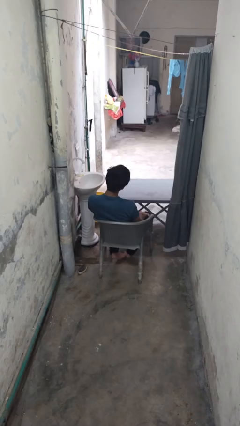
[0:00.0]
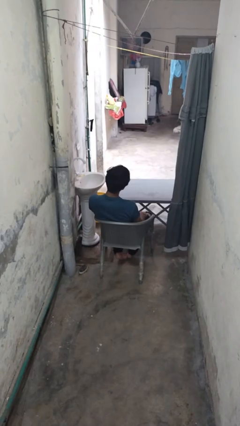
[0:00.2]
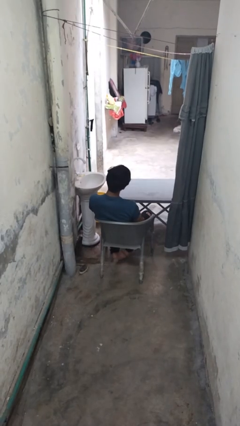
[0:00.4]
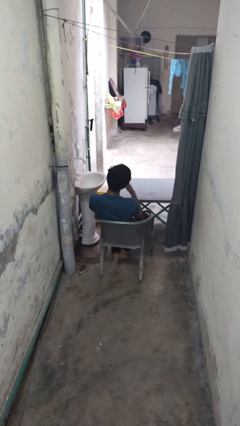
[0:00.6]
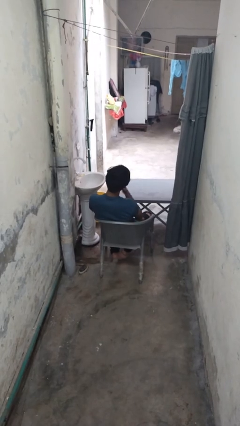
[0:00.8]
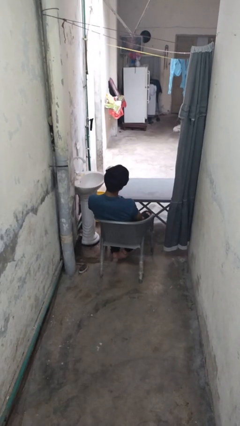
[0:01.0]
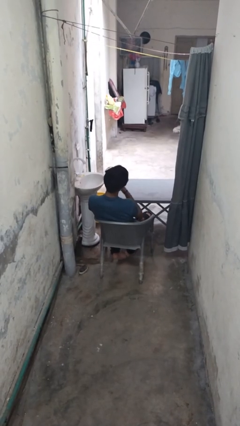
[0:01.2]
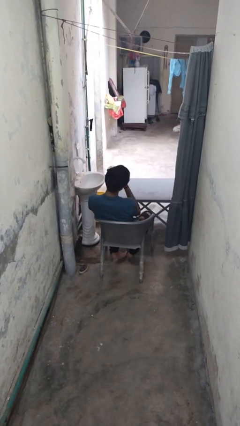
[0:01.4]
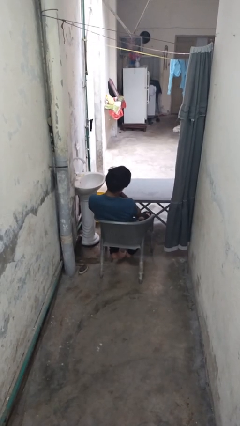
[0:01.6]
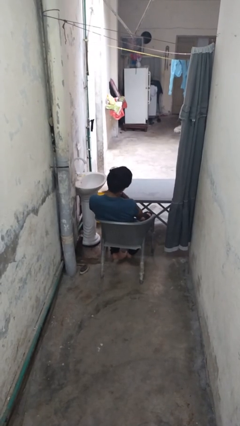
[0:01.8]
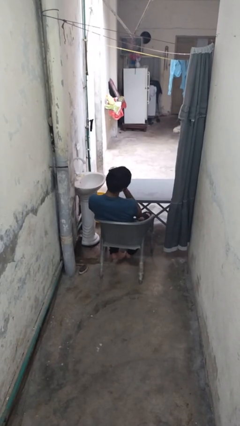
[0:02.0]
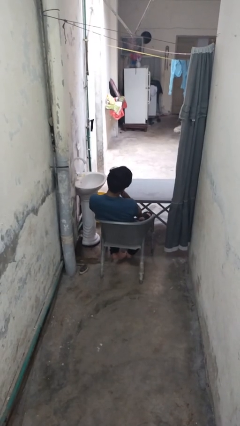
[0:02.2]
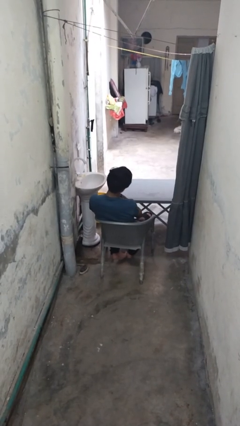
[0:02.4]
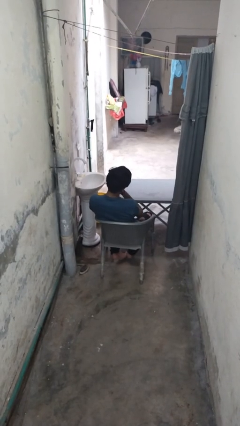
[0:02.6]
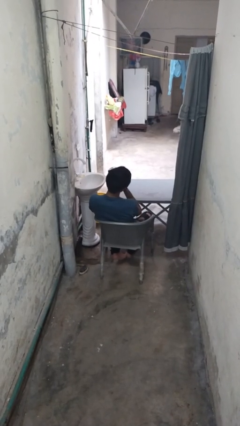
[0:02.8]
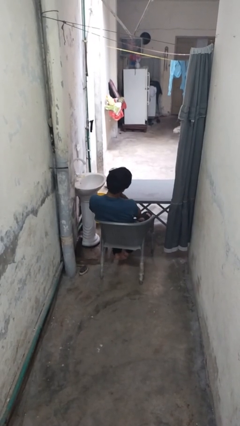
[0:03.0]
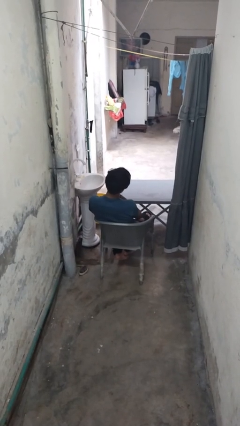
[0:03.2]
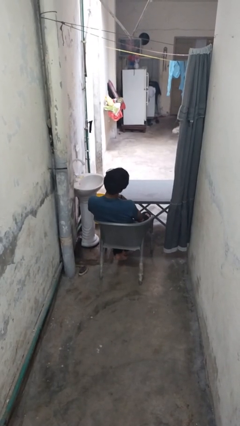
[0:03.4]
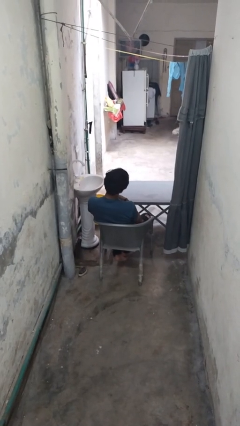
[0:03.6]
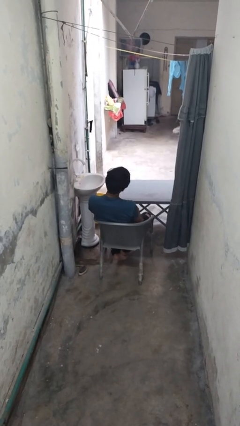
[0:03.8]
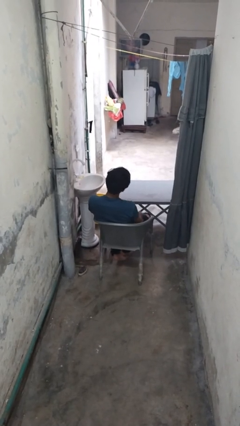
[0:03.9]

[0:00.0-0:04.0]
person drums on chest

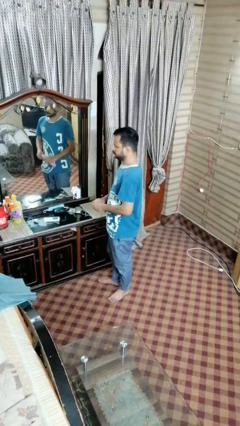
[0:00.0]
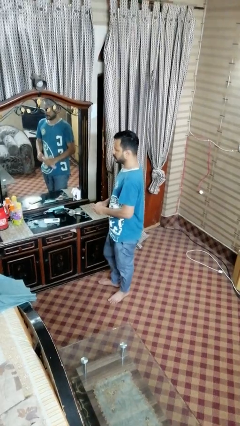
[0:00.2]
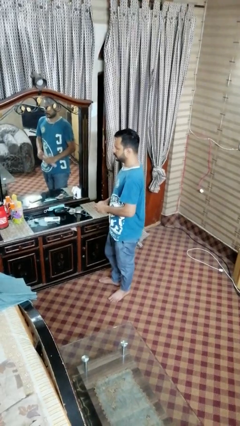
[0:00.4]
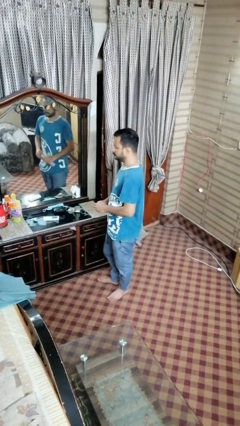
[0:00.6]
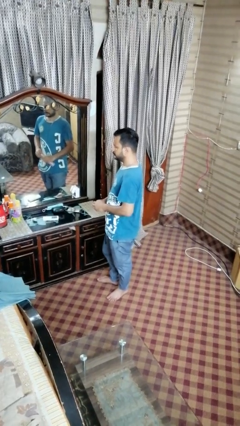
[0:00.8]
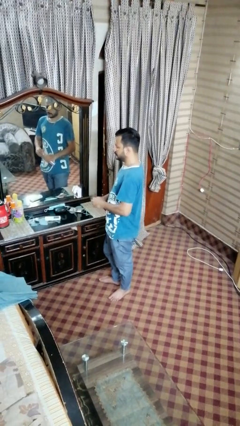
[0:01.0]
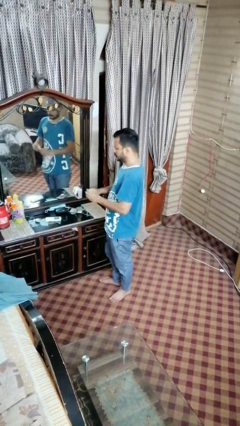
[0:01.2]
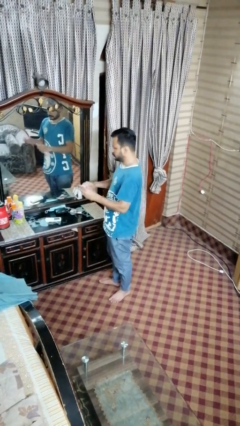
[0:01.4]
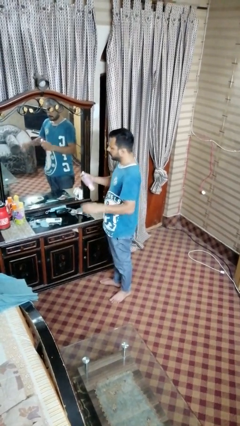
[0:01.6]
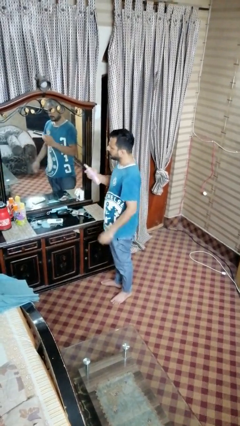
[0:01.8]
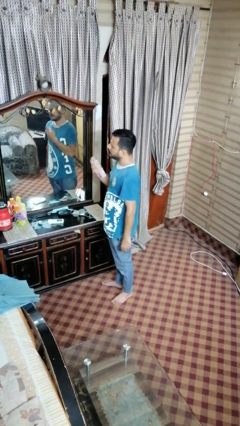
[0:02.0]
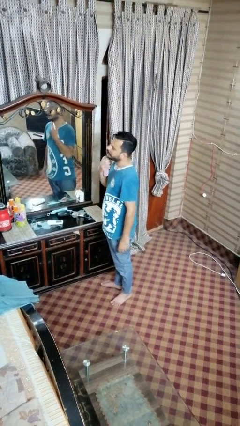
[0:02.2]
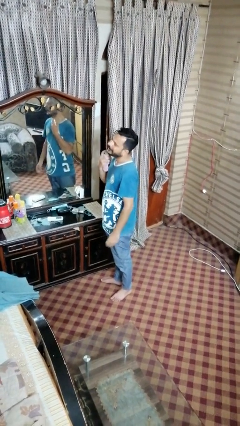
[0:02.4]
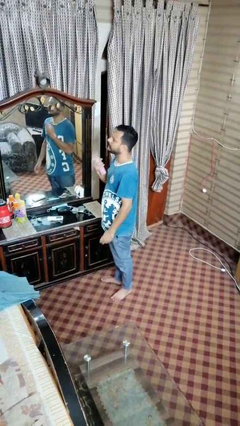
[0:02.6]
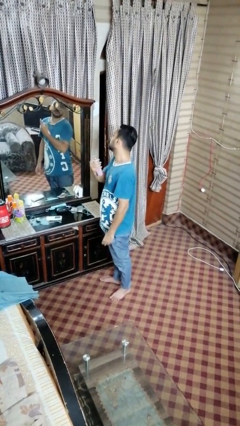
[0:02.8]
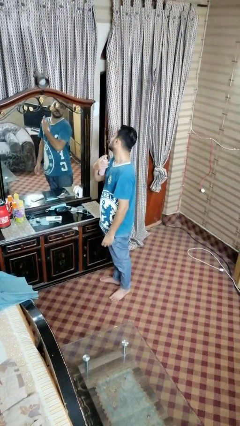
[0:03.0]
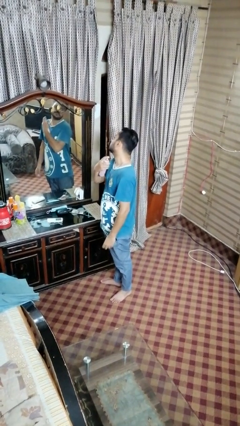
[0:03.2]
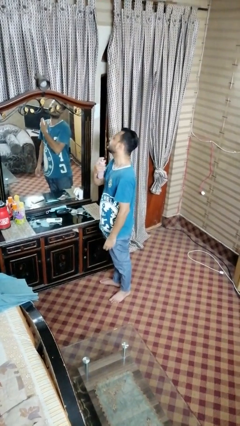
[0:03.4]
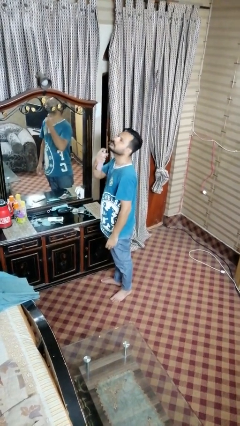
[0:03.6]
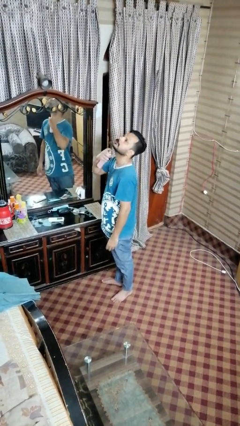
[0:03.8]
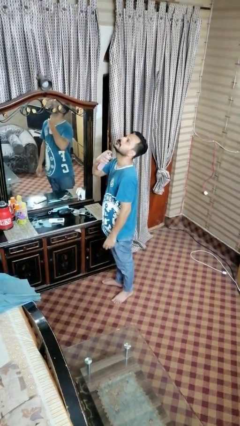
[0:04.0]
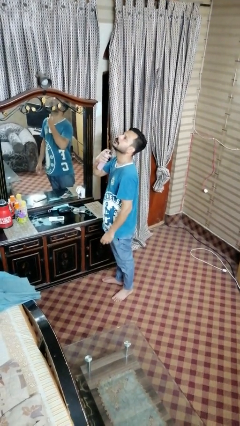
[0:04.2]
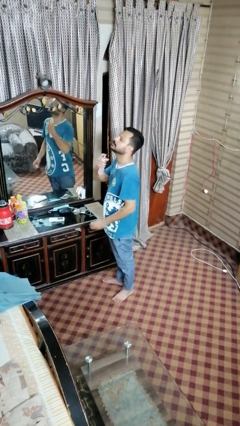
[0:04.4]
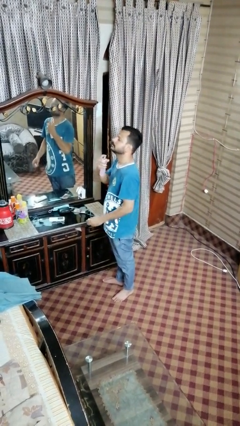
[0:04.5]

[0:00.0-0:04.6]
person sprays from bottle

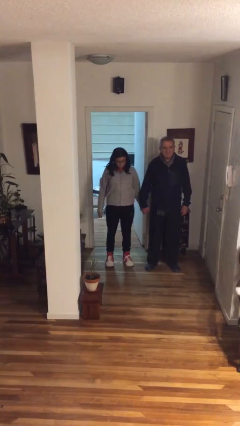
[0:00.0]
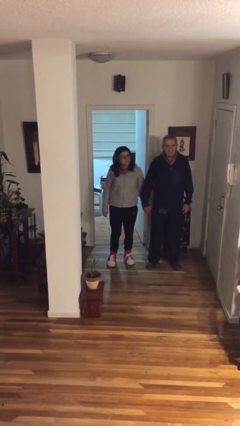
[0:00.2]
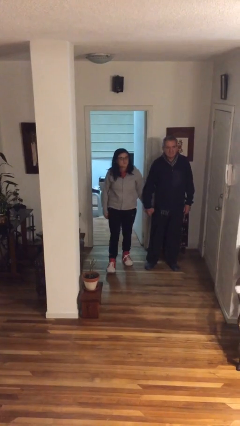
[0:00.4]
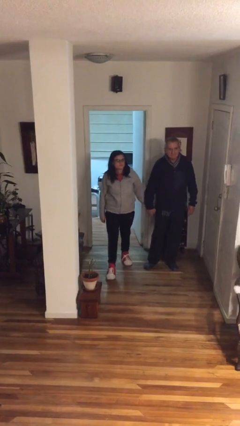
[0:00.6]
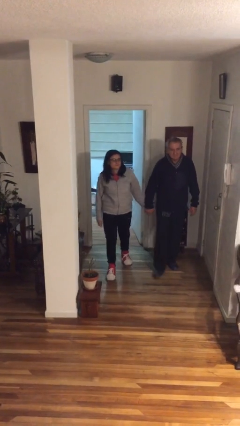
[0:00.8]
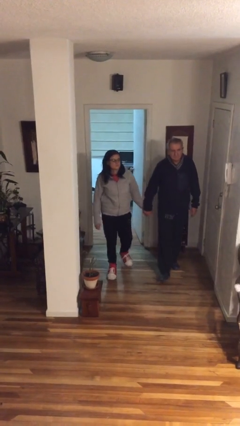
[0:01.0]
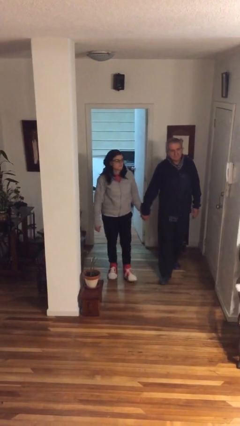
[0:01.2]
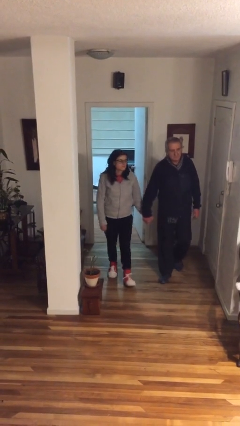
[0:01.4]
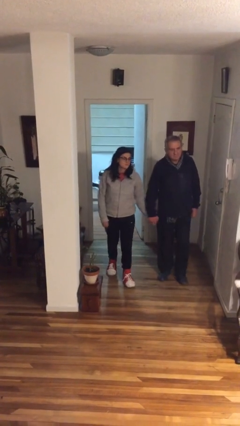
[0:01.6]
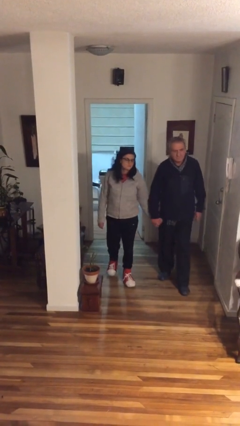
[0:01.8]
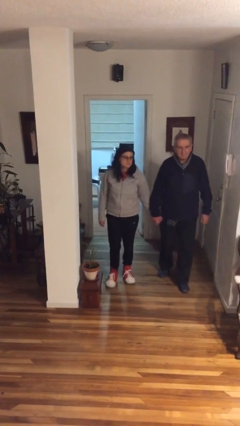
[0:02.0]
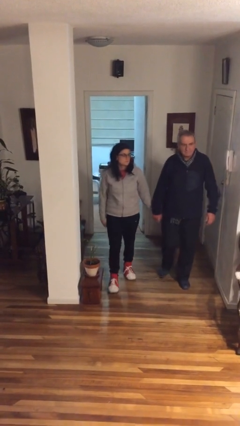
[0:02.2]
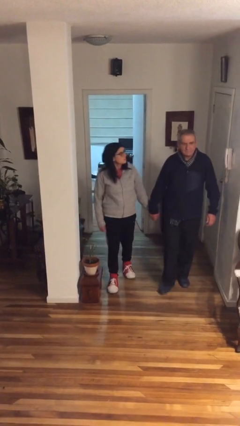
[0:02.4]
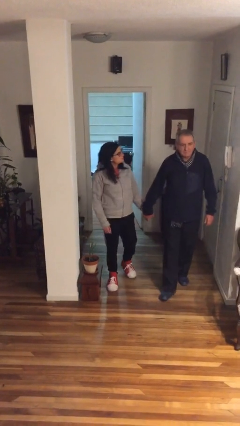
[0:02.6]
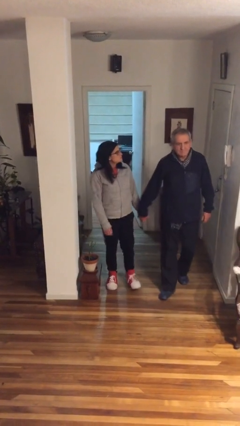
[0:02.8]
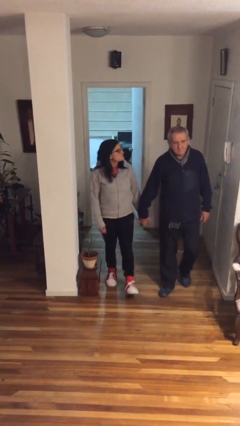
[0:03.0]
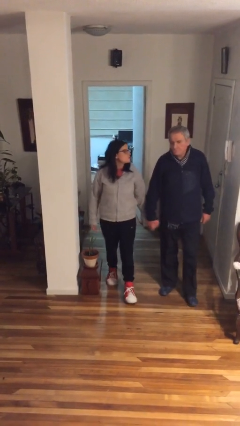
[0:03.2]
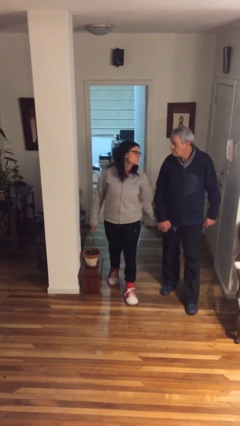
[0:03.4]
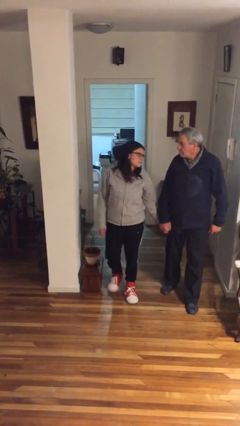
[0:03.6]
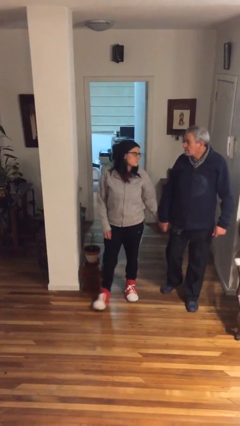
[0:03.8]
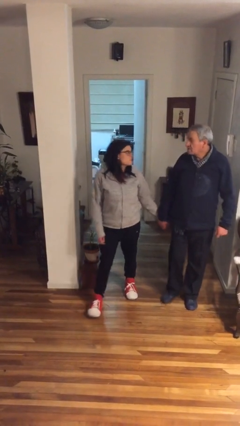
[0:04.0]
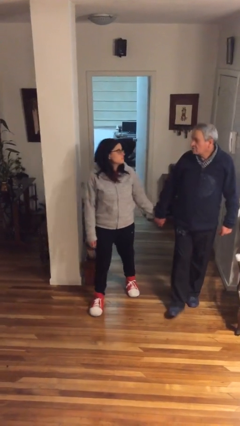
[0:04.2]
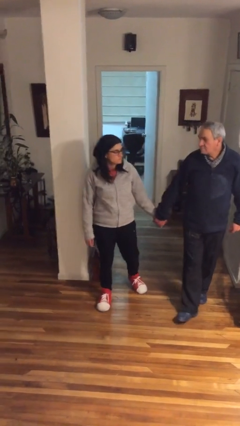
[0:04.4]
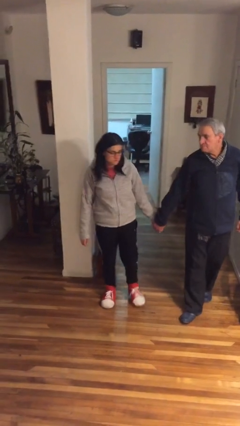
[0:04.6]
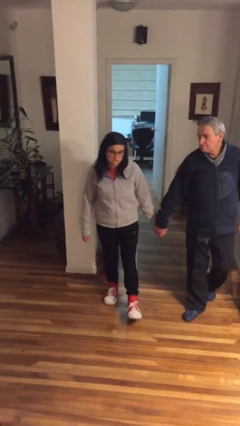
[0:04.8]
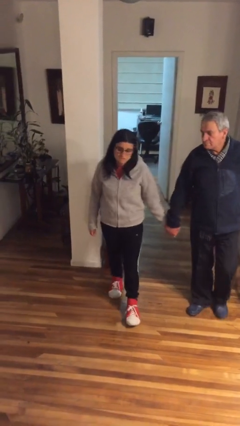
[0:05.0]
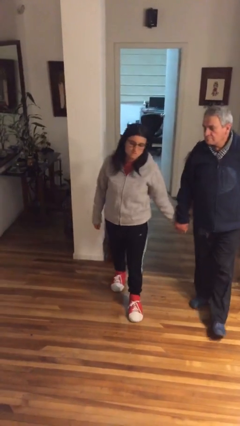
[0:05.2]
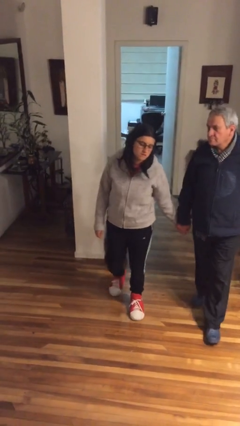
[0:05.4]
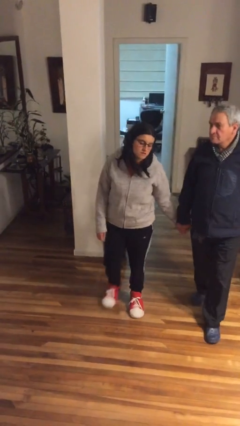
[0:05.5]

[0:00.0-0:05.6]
person holds hand

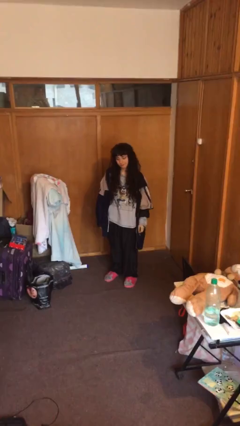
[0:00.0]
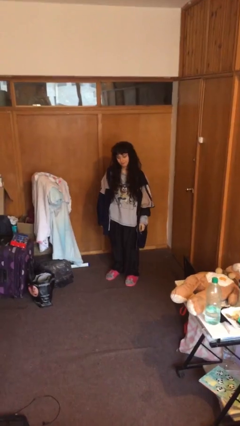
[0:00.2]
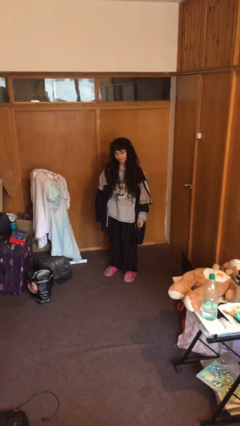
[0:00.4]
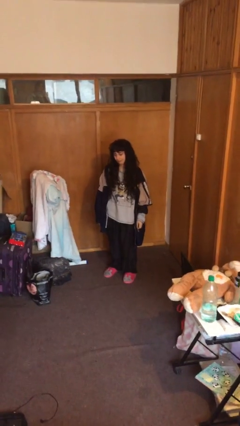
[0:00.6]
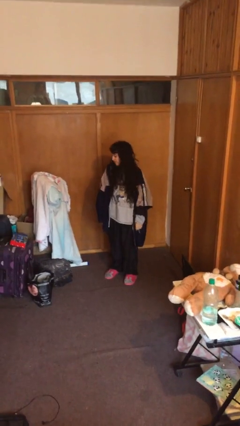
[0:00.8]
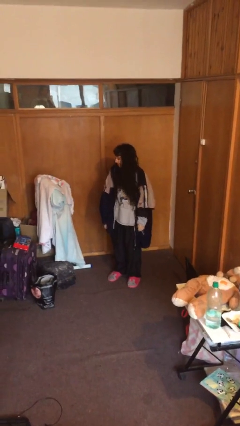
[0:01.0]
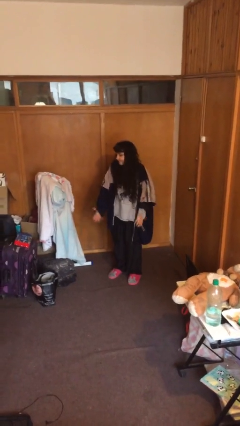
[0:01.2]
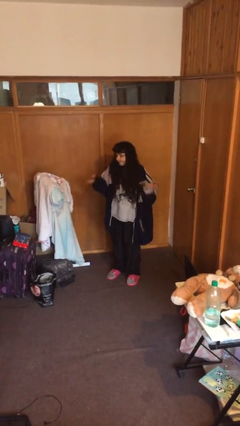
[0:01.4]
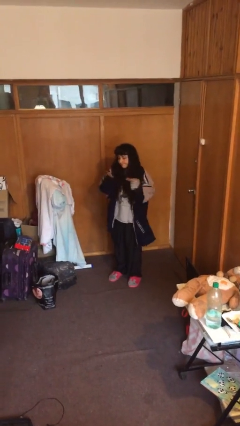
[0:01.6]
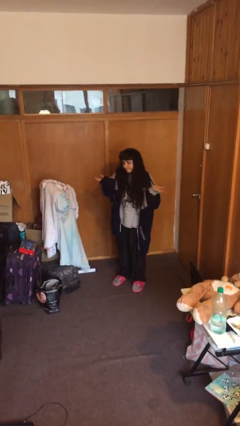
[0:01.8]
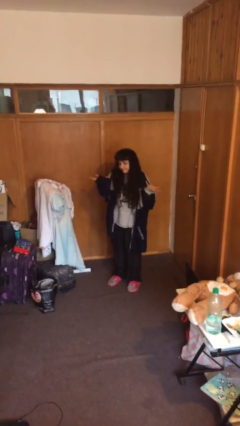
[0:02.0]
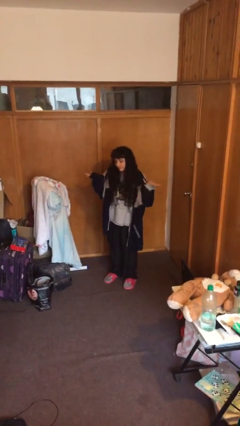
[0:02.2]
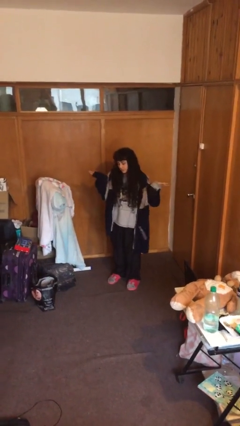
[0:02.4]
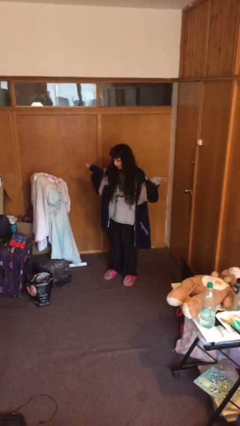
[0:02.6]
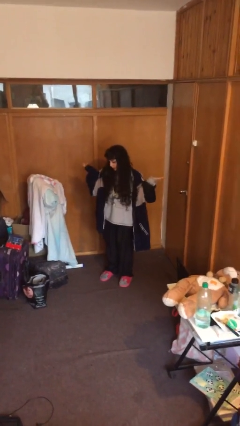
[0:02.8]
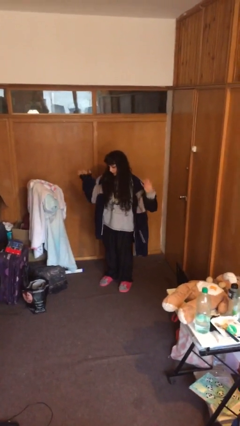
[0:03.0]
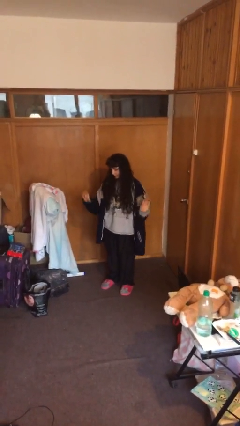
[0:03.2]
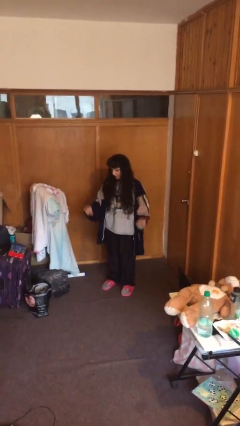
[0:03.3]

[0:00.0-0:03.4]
person shrugs
